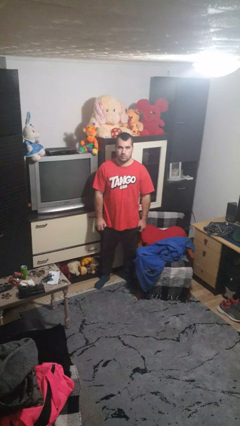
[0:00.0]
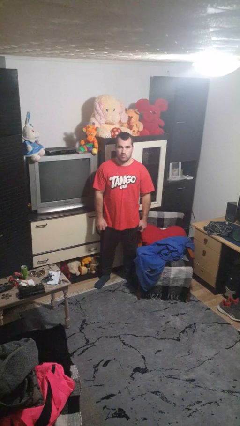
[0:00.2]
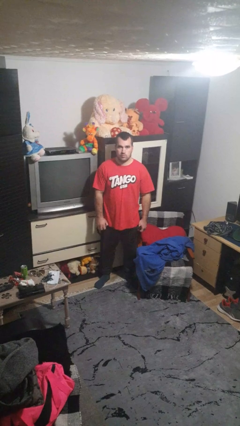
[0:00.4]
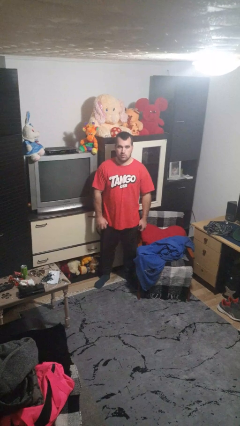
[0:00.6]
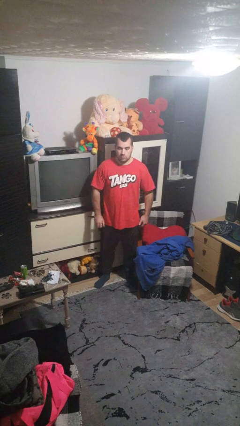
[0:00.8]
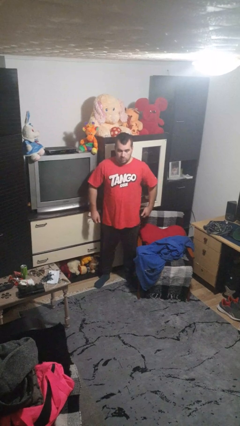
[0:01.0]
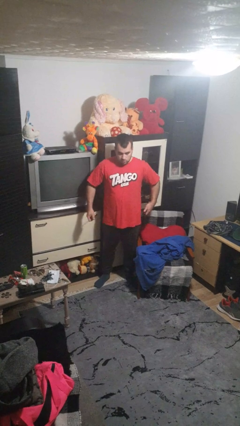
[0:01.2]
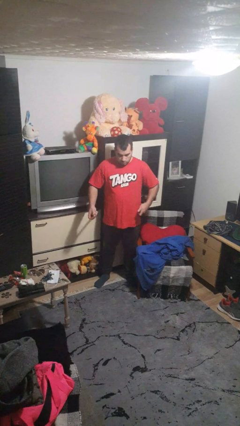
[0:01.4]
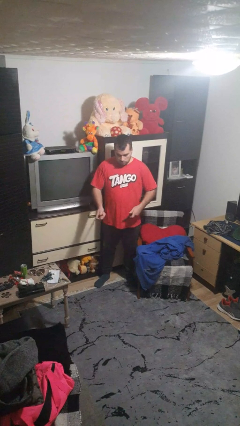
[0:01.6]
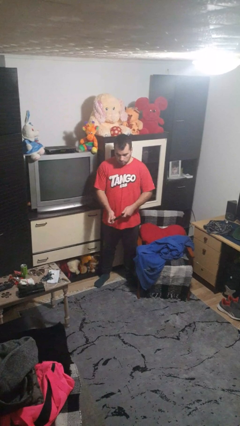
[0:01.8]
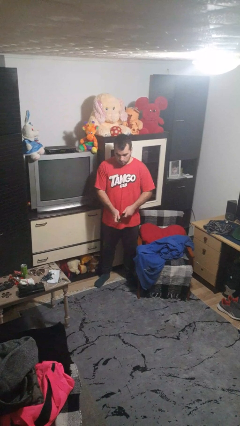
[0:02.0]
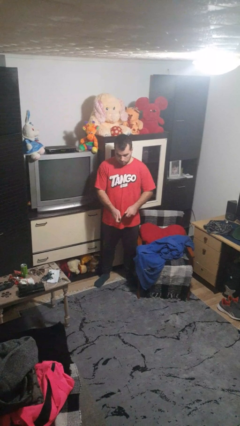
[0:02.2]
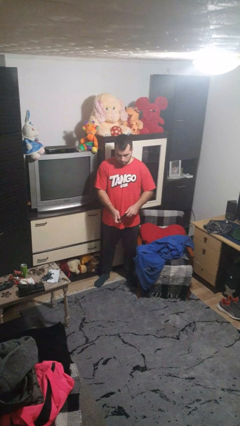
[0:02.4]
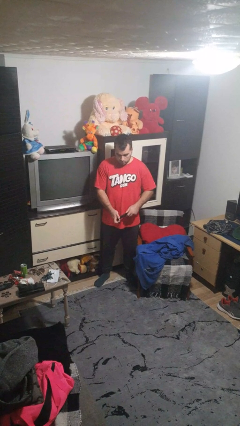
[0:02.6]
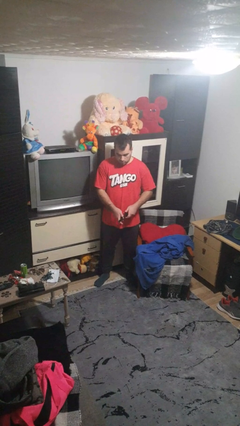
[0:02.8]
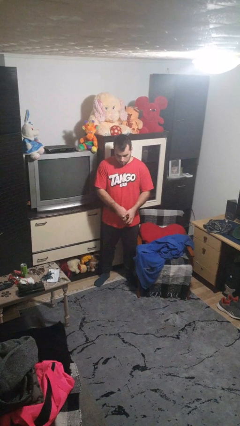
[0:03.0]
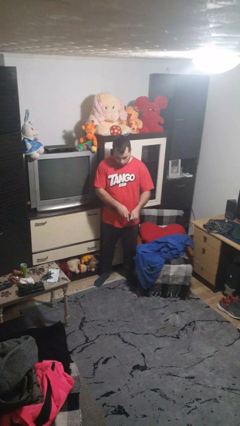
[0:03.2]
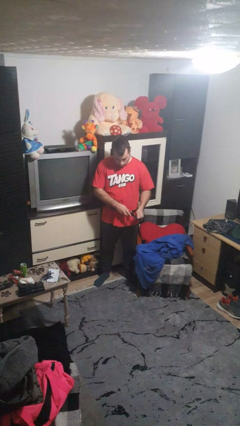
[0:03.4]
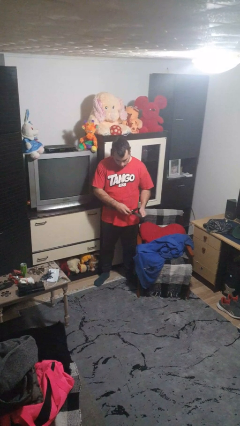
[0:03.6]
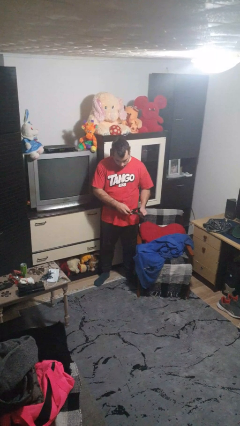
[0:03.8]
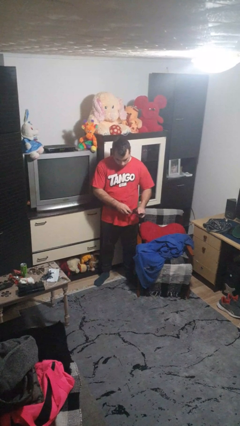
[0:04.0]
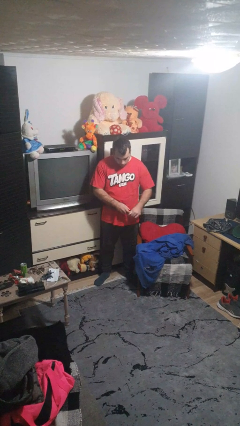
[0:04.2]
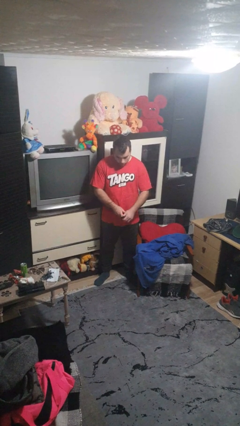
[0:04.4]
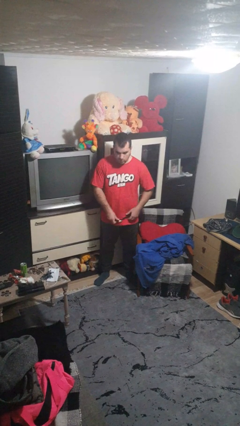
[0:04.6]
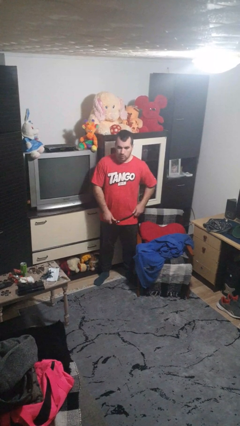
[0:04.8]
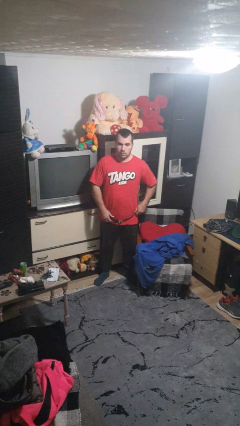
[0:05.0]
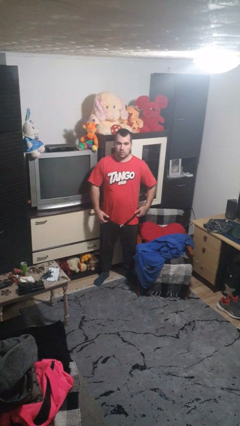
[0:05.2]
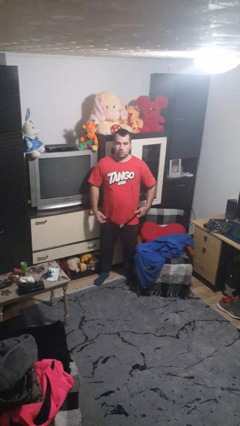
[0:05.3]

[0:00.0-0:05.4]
person puts on belt

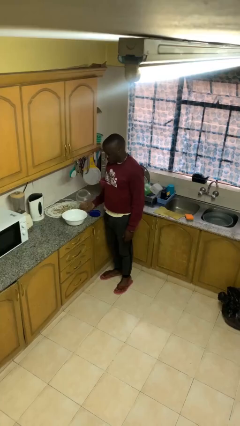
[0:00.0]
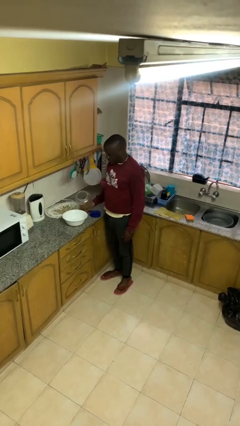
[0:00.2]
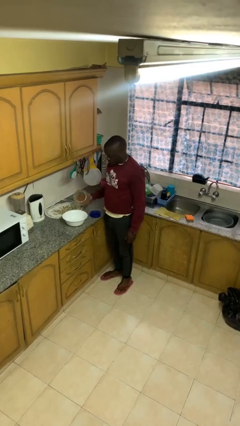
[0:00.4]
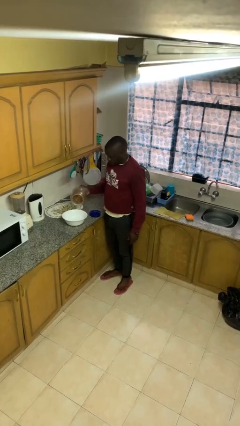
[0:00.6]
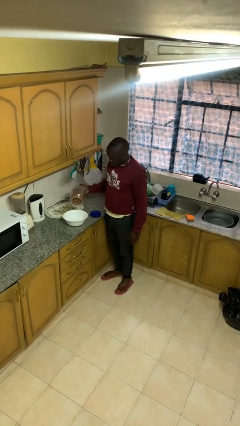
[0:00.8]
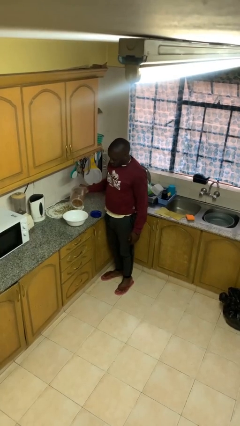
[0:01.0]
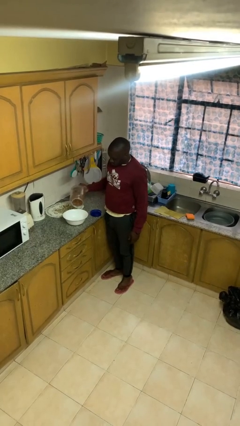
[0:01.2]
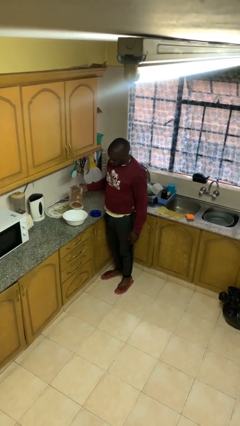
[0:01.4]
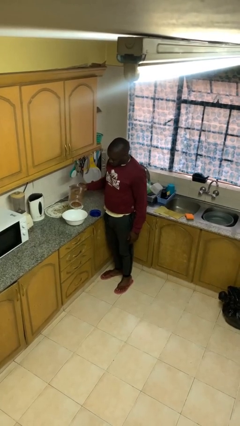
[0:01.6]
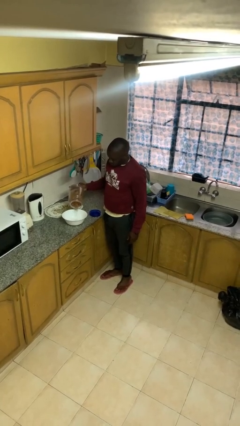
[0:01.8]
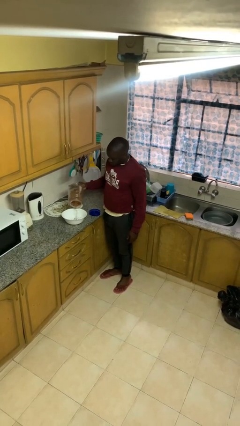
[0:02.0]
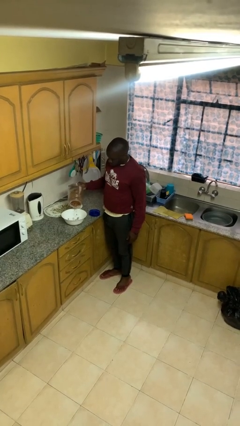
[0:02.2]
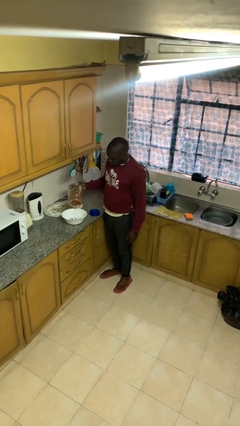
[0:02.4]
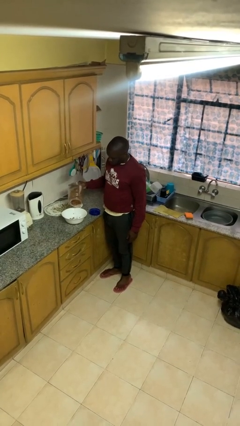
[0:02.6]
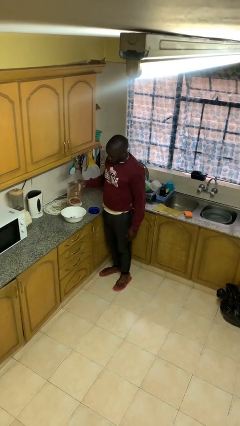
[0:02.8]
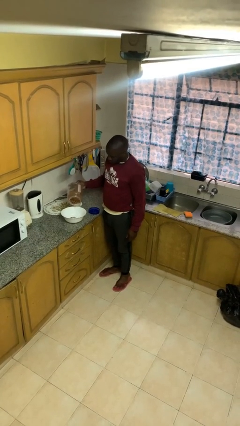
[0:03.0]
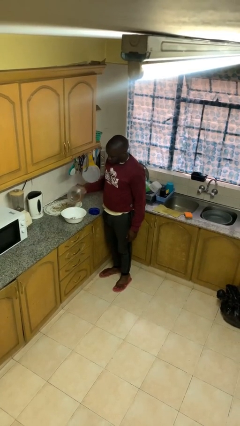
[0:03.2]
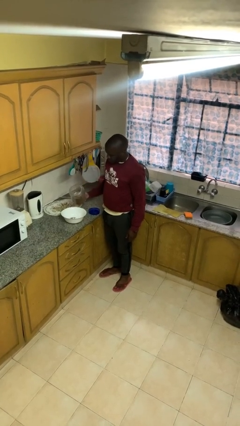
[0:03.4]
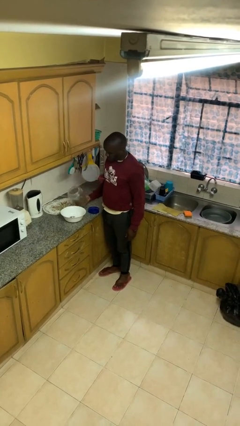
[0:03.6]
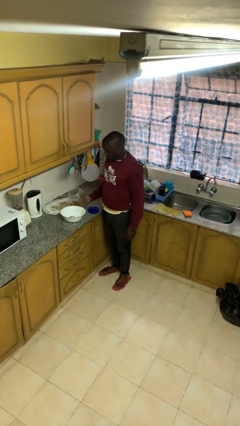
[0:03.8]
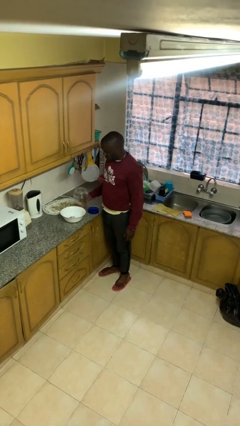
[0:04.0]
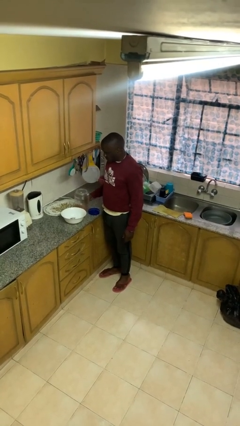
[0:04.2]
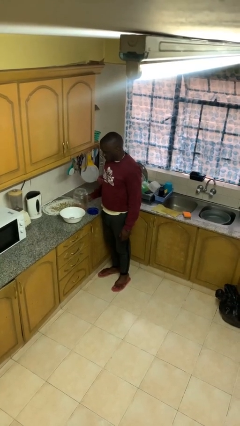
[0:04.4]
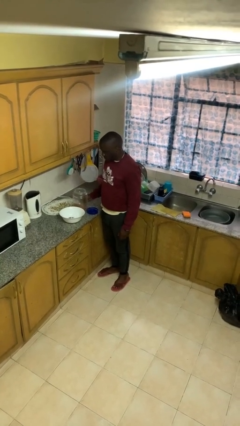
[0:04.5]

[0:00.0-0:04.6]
person pours into bowl

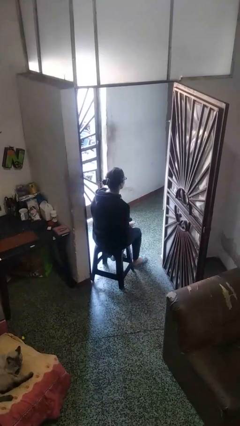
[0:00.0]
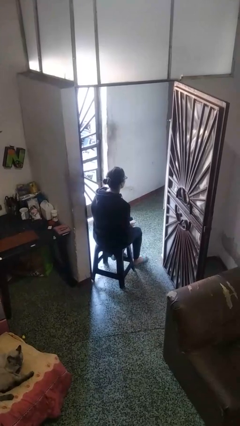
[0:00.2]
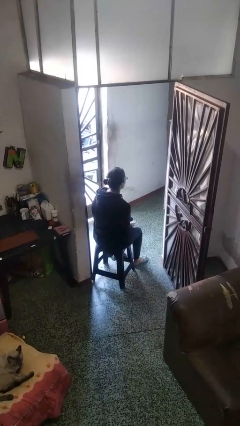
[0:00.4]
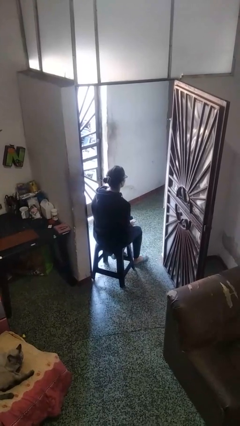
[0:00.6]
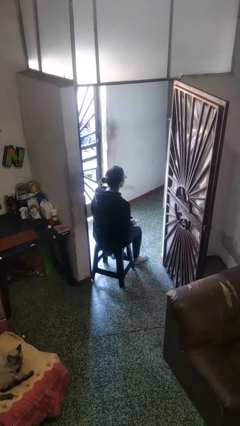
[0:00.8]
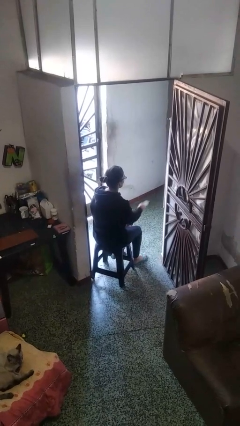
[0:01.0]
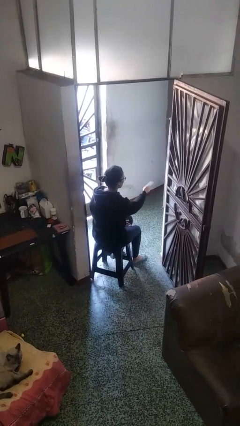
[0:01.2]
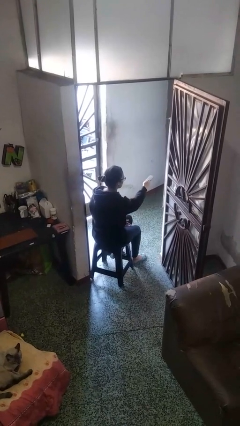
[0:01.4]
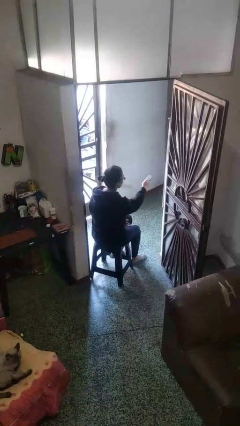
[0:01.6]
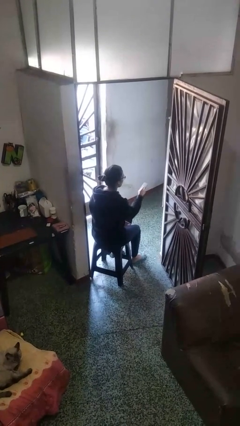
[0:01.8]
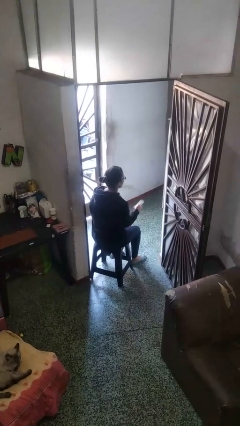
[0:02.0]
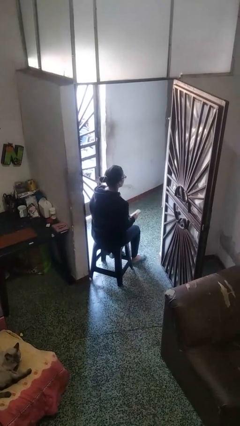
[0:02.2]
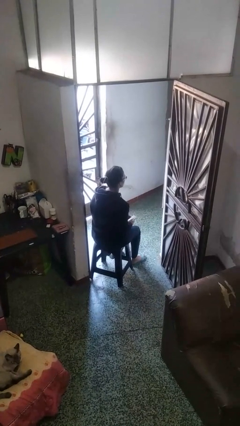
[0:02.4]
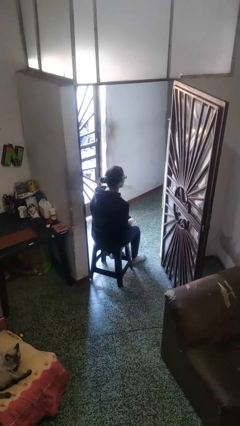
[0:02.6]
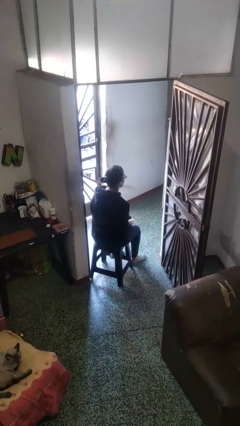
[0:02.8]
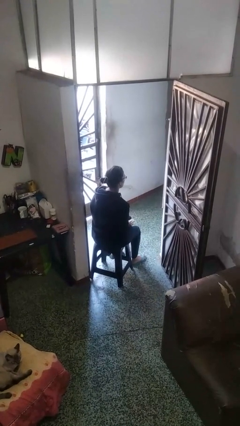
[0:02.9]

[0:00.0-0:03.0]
person uses television remote

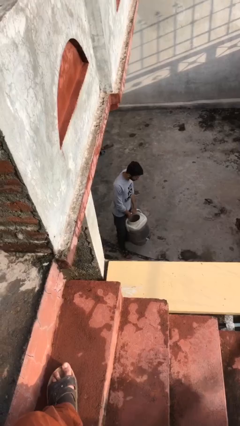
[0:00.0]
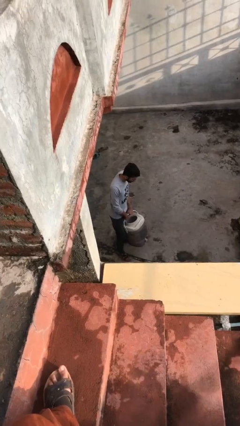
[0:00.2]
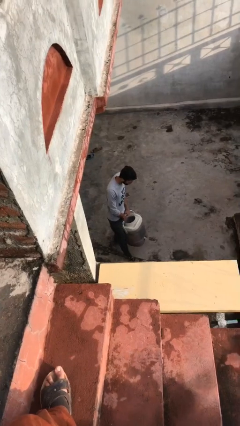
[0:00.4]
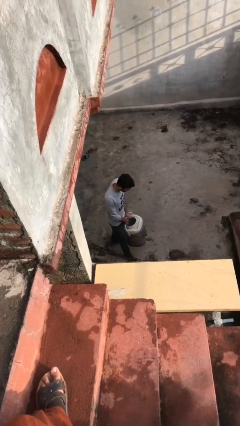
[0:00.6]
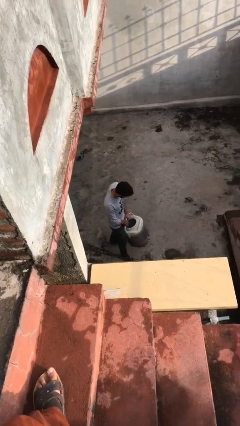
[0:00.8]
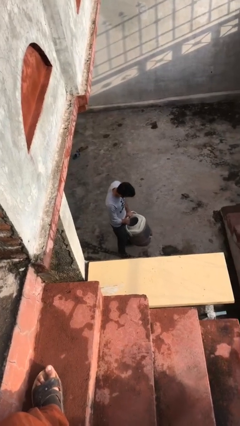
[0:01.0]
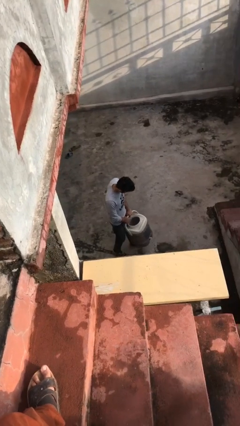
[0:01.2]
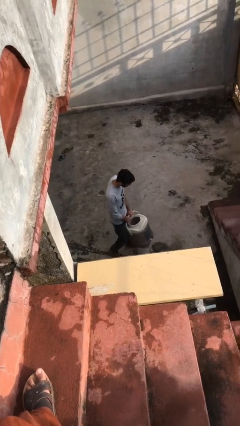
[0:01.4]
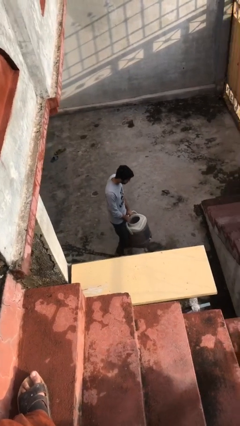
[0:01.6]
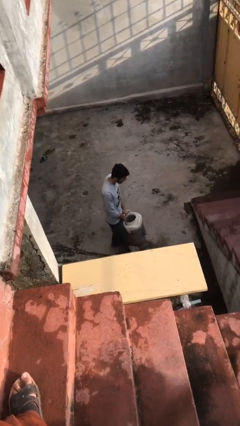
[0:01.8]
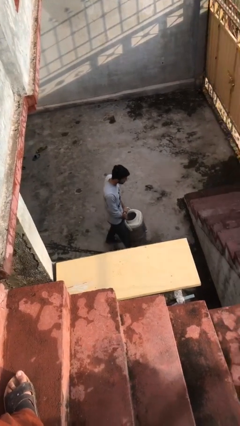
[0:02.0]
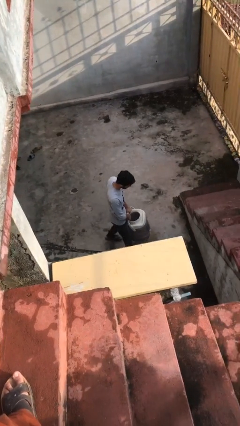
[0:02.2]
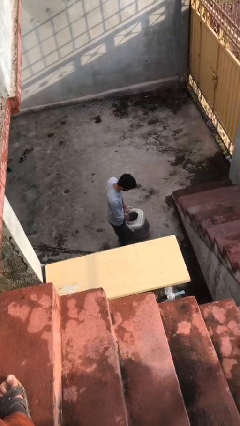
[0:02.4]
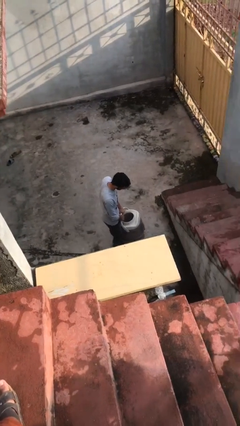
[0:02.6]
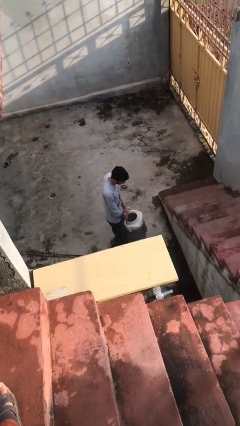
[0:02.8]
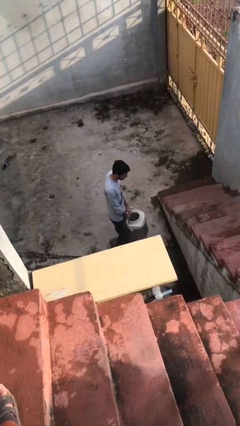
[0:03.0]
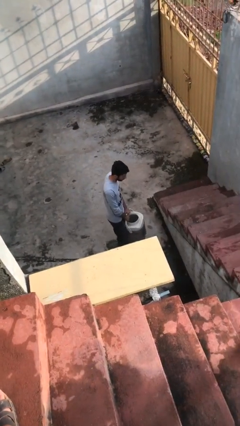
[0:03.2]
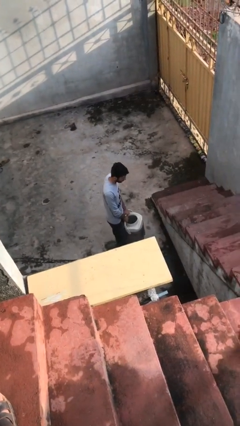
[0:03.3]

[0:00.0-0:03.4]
person carries heavy object

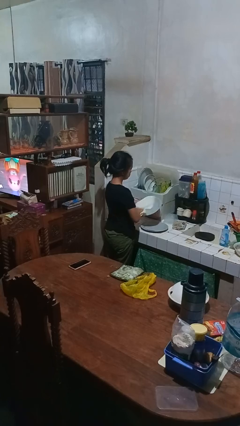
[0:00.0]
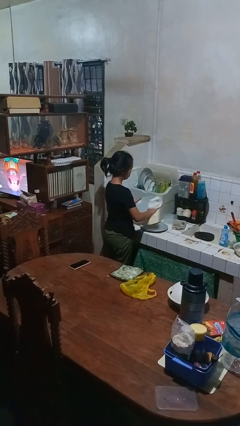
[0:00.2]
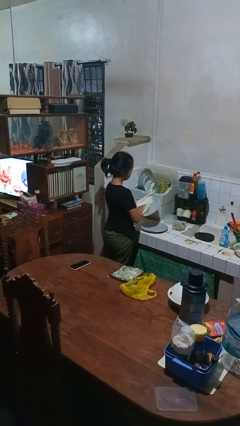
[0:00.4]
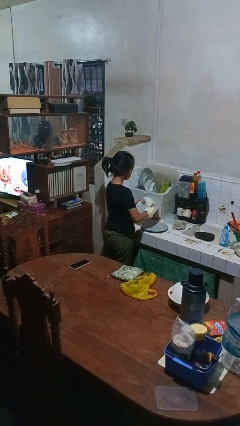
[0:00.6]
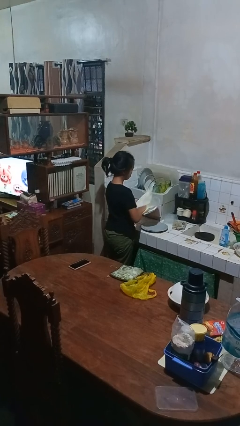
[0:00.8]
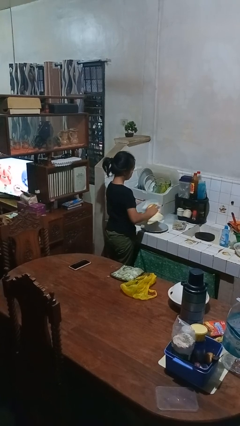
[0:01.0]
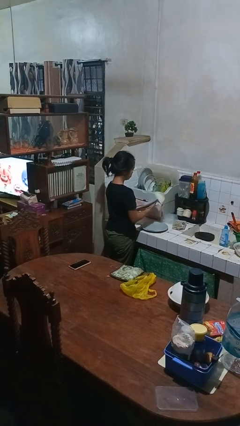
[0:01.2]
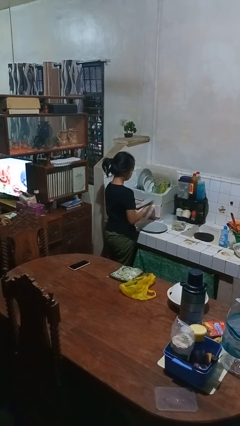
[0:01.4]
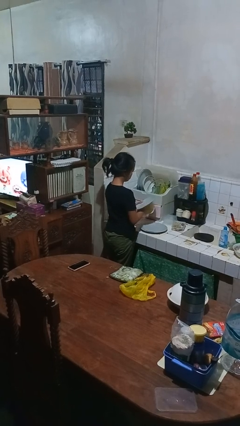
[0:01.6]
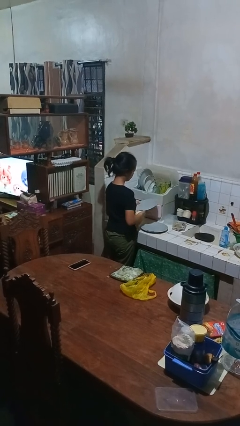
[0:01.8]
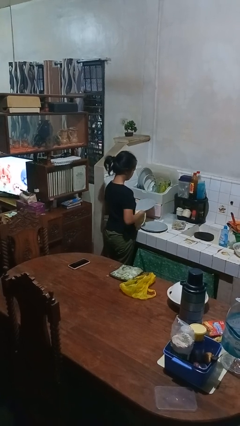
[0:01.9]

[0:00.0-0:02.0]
person dries dish
